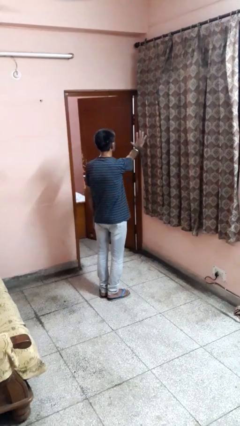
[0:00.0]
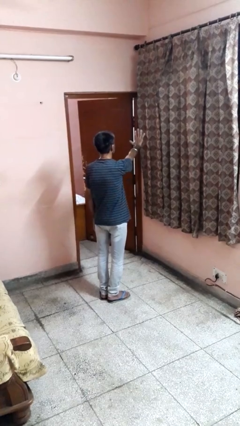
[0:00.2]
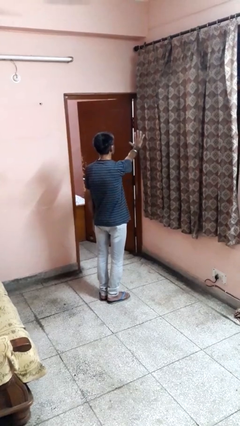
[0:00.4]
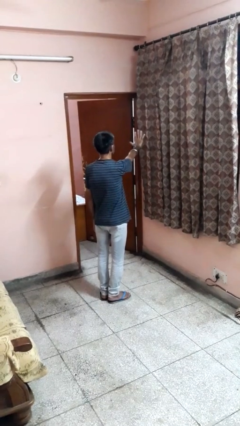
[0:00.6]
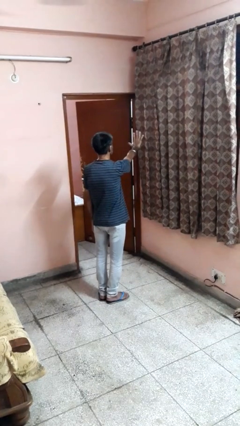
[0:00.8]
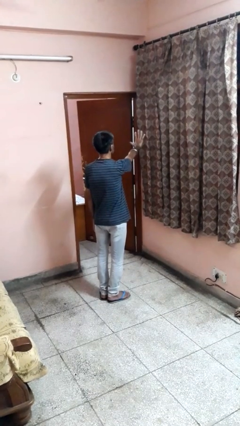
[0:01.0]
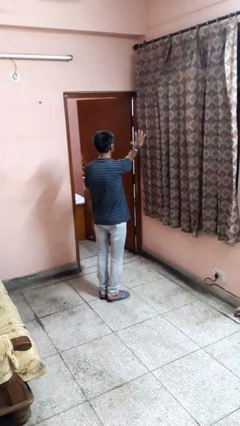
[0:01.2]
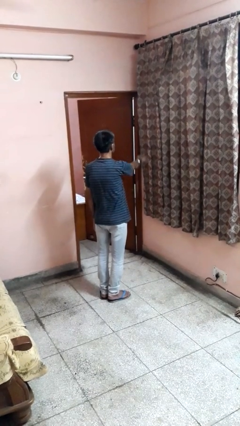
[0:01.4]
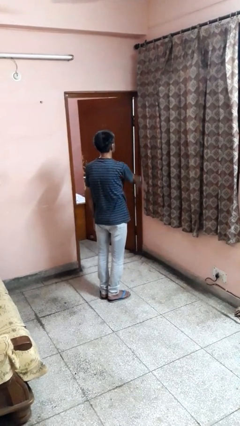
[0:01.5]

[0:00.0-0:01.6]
person gestures number five

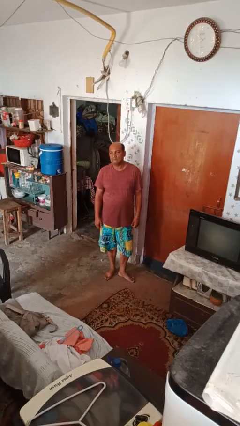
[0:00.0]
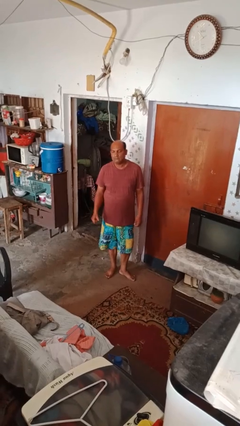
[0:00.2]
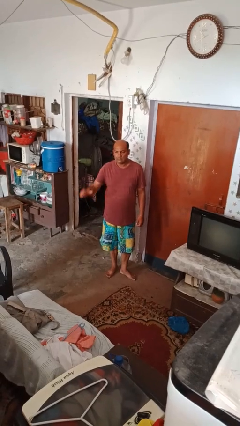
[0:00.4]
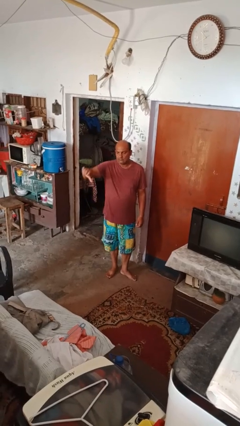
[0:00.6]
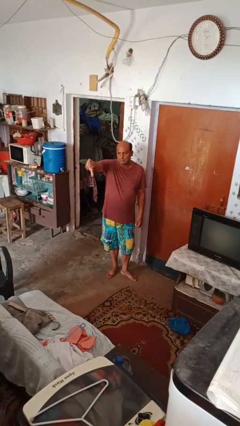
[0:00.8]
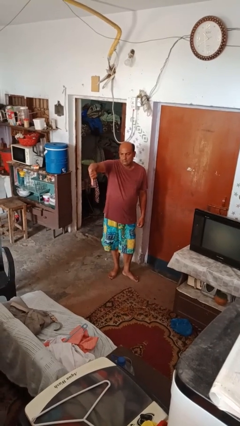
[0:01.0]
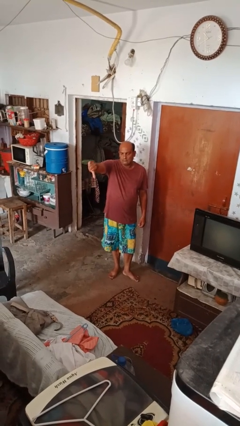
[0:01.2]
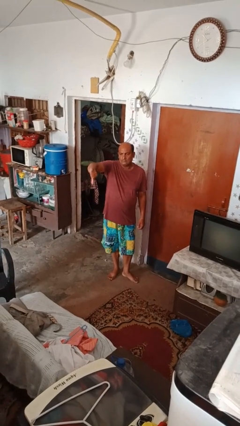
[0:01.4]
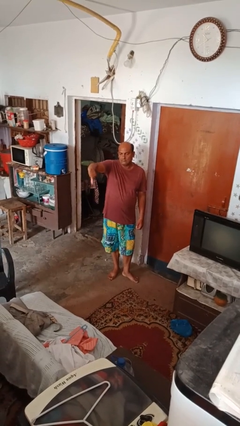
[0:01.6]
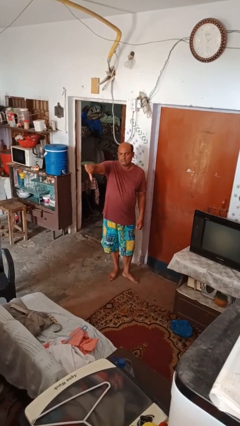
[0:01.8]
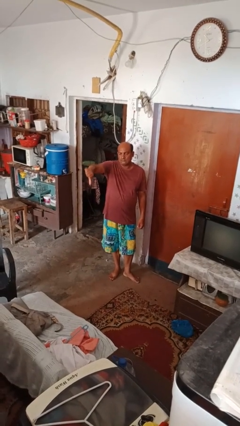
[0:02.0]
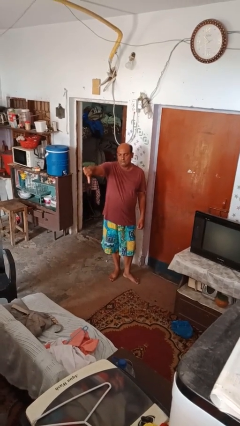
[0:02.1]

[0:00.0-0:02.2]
person gestures thumbs down

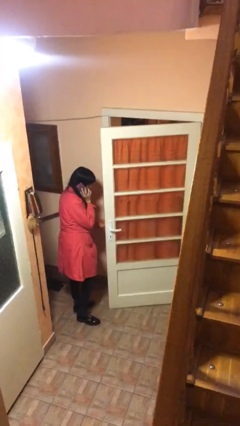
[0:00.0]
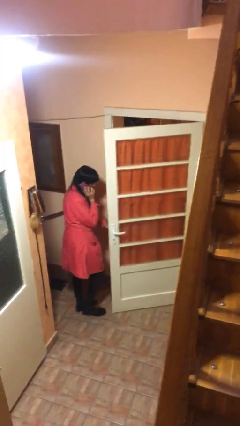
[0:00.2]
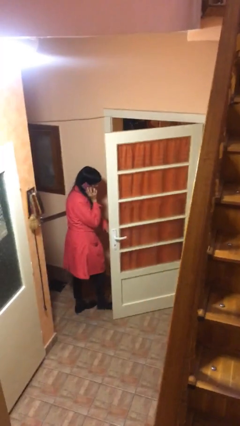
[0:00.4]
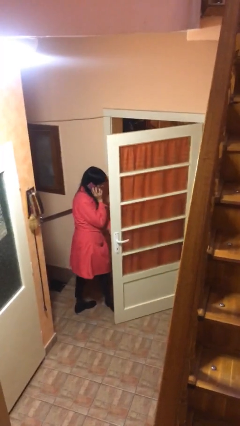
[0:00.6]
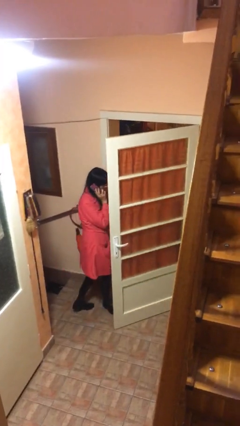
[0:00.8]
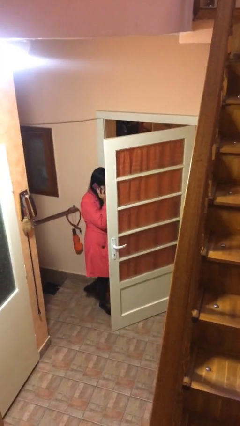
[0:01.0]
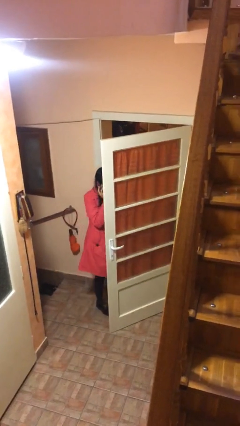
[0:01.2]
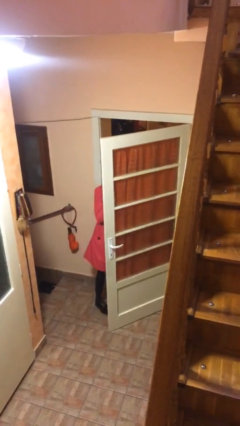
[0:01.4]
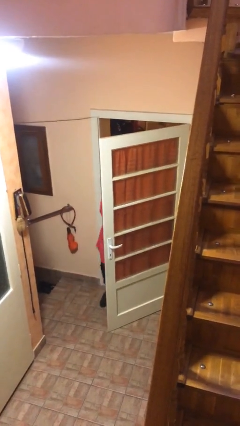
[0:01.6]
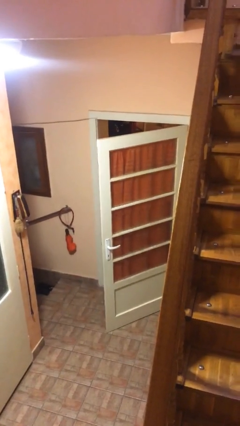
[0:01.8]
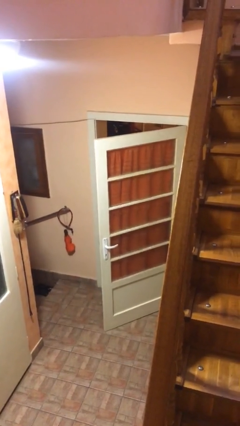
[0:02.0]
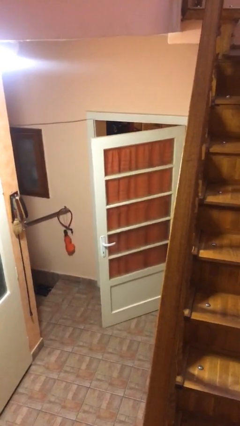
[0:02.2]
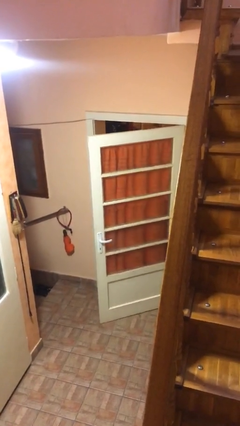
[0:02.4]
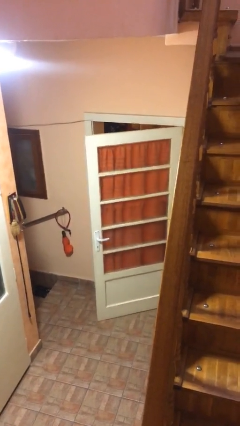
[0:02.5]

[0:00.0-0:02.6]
person exits scene through structure

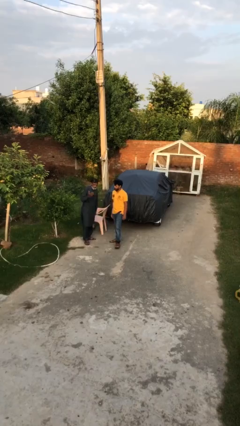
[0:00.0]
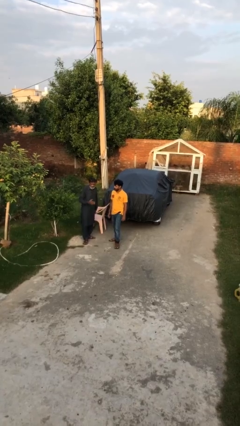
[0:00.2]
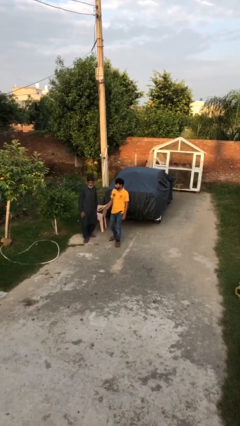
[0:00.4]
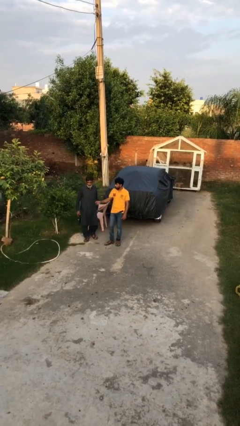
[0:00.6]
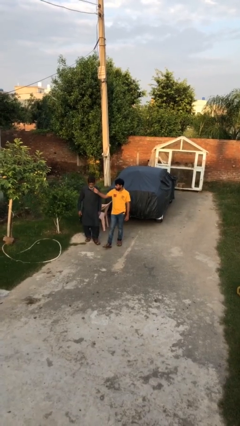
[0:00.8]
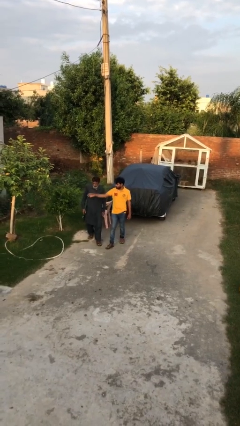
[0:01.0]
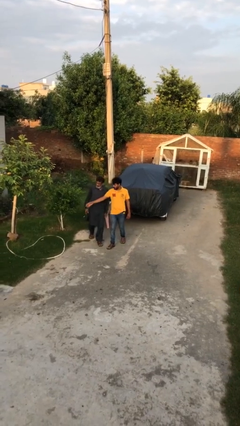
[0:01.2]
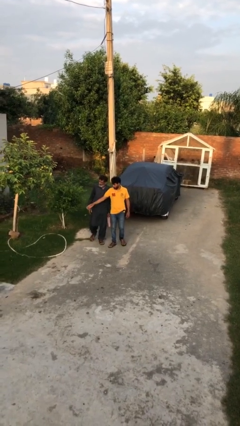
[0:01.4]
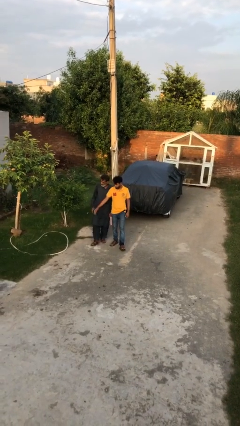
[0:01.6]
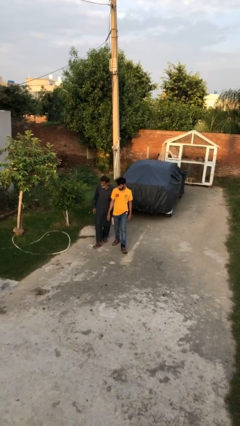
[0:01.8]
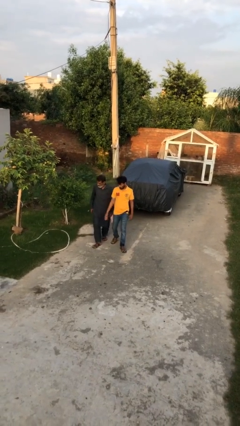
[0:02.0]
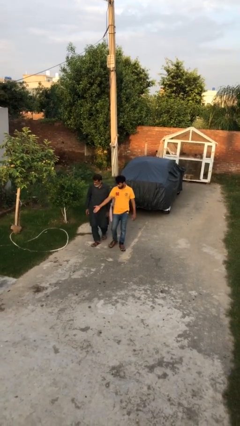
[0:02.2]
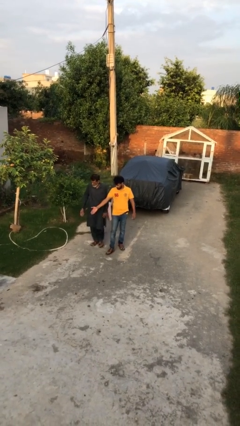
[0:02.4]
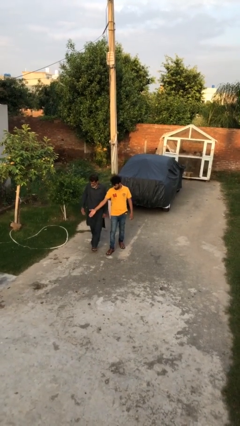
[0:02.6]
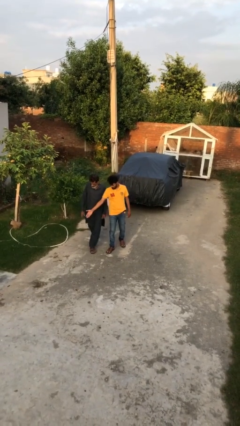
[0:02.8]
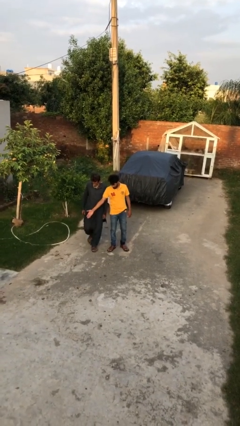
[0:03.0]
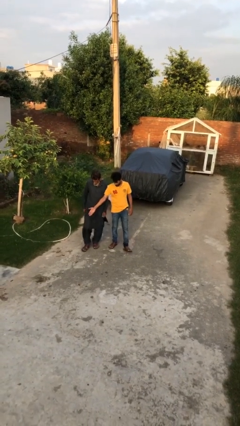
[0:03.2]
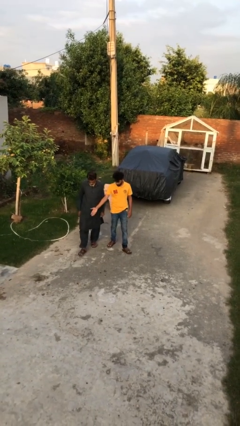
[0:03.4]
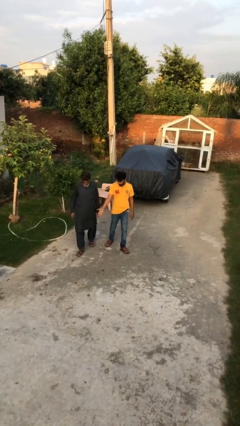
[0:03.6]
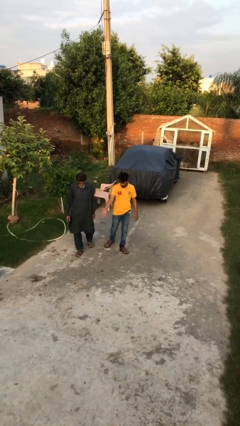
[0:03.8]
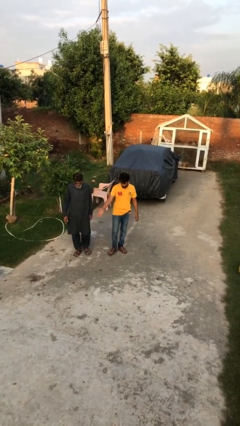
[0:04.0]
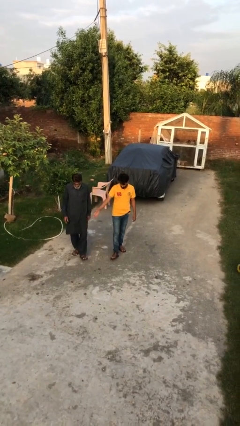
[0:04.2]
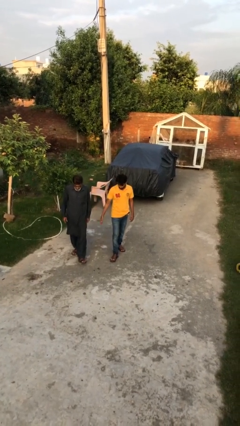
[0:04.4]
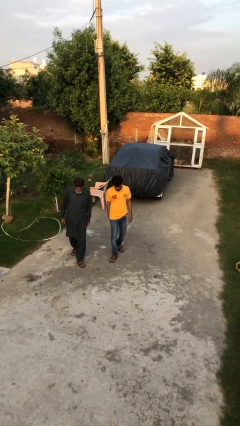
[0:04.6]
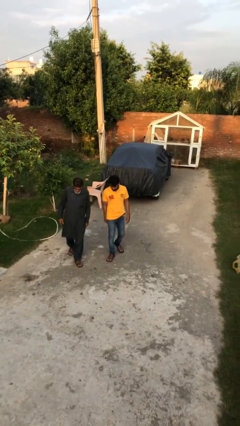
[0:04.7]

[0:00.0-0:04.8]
person talks to person

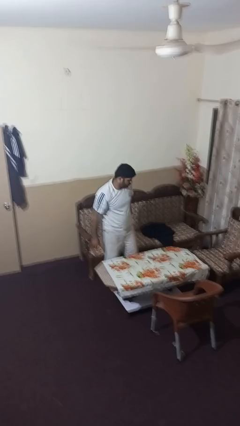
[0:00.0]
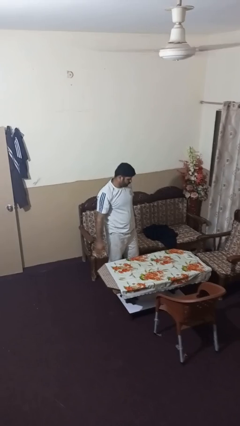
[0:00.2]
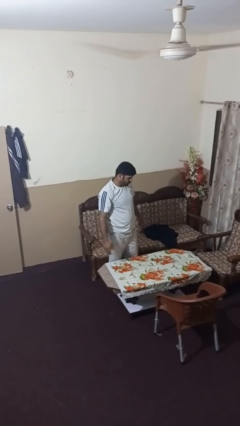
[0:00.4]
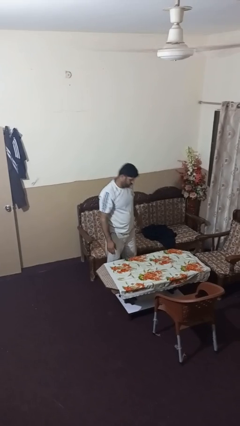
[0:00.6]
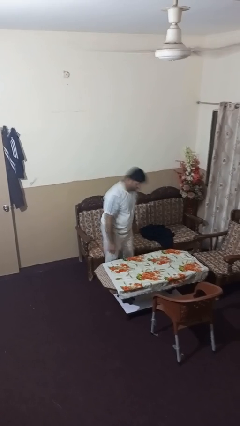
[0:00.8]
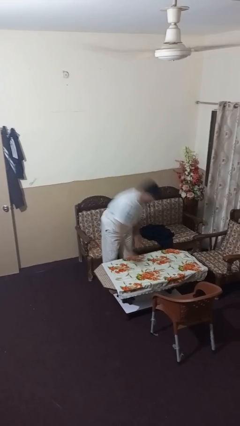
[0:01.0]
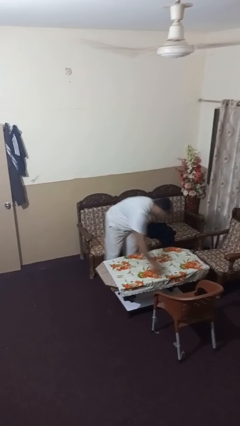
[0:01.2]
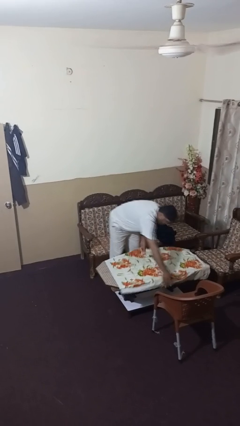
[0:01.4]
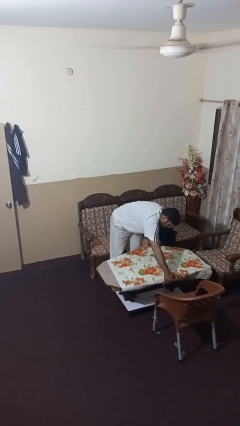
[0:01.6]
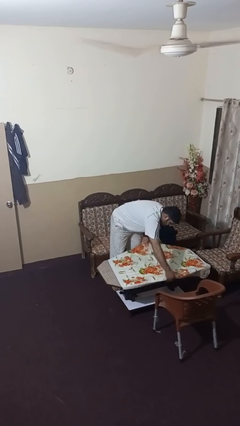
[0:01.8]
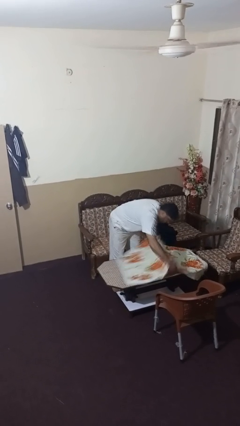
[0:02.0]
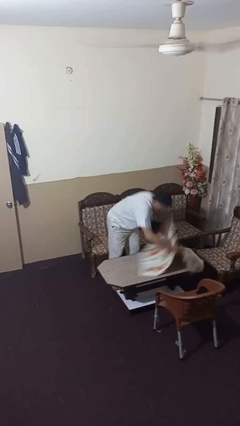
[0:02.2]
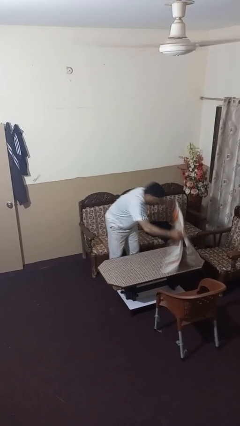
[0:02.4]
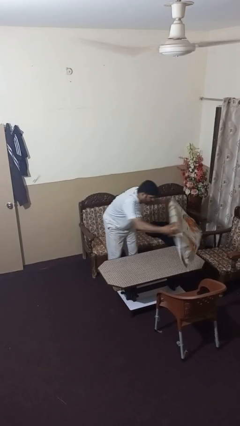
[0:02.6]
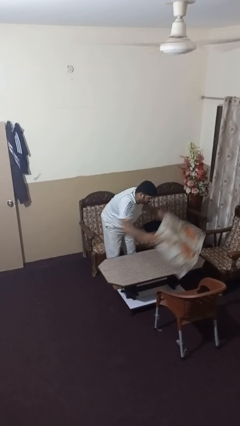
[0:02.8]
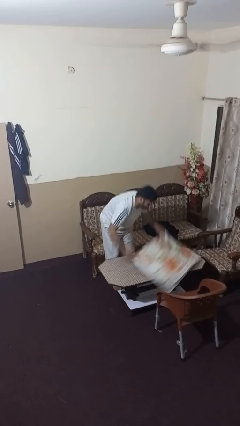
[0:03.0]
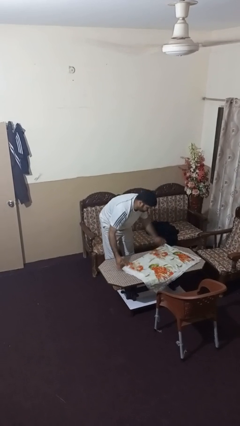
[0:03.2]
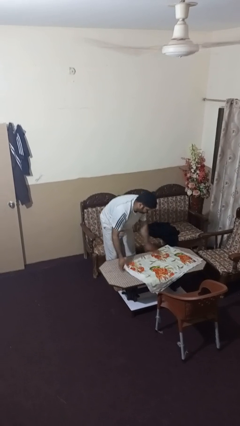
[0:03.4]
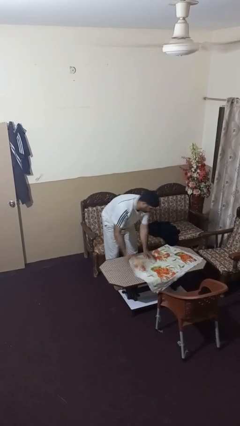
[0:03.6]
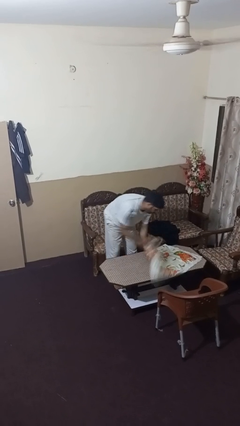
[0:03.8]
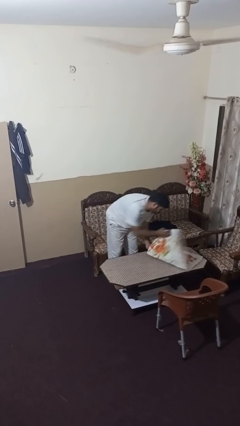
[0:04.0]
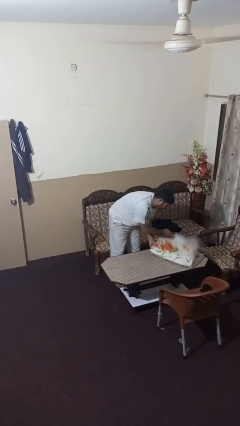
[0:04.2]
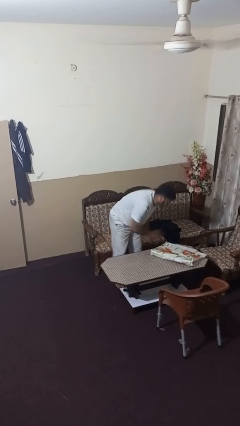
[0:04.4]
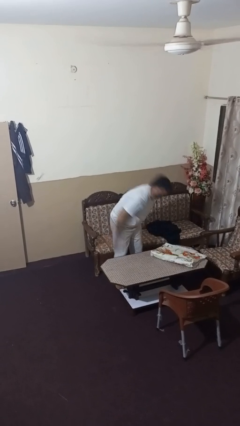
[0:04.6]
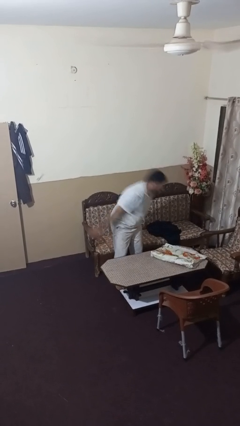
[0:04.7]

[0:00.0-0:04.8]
person folds tablecloth

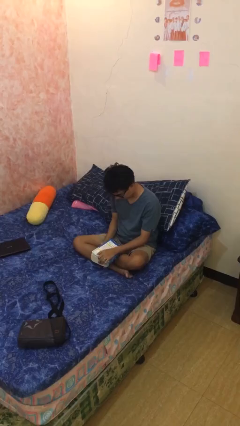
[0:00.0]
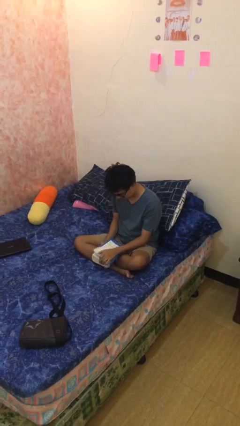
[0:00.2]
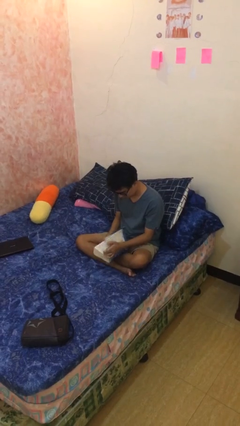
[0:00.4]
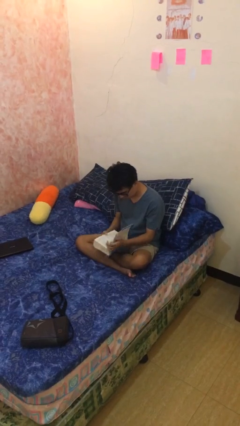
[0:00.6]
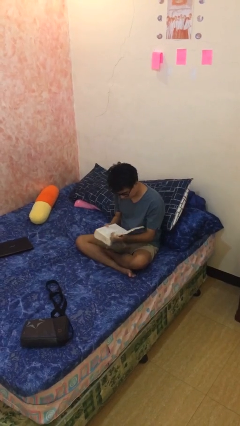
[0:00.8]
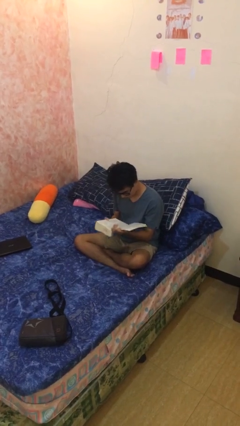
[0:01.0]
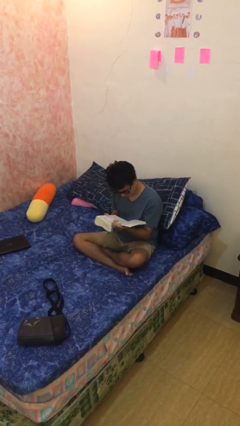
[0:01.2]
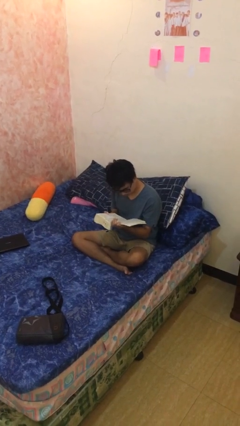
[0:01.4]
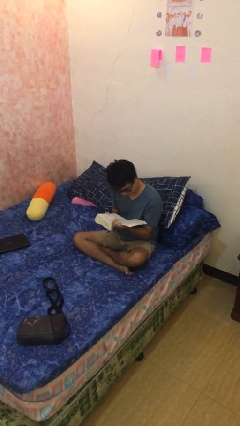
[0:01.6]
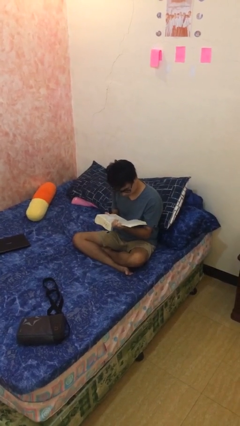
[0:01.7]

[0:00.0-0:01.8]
person reads document
